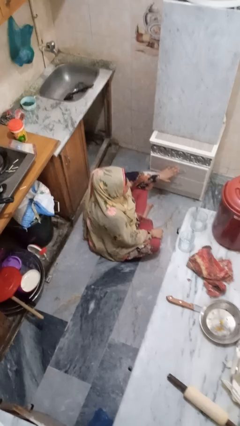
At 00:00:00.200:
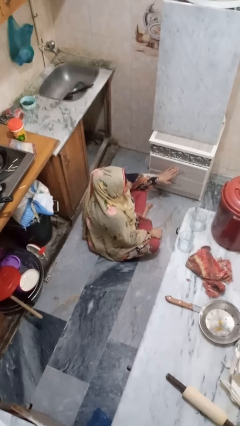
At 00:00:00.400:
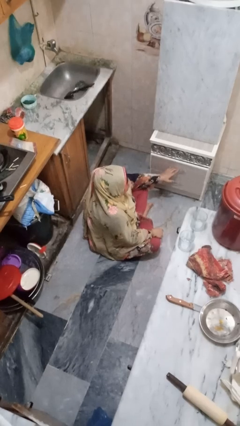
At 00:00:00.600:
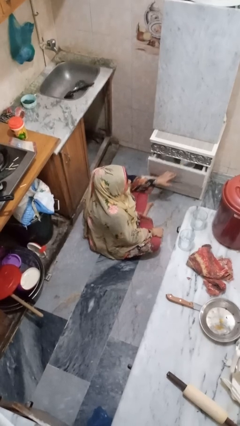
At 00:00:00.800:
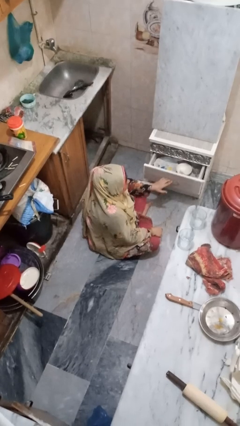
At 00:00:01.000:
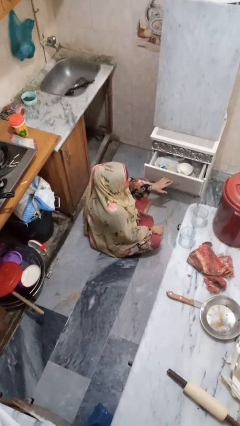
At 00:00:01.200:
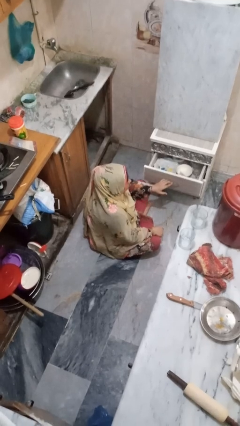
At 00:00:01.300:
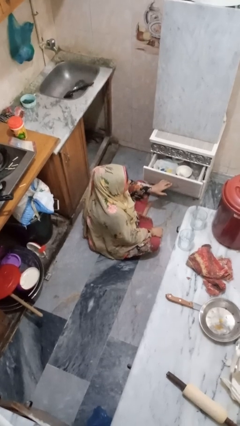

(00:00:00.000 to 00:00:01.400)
person opens kitchen drawer

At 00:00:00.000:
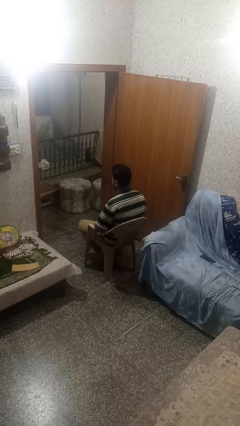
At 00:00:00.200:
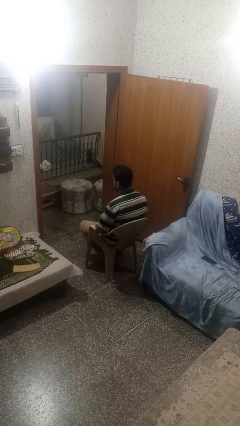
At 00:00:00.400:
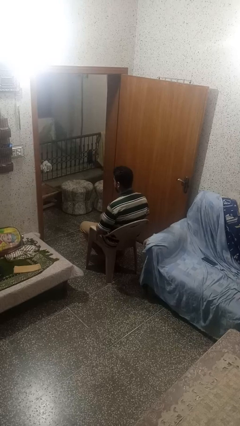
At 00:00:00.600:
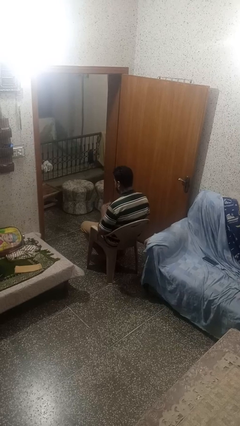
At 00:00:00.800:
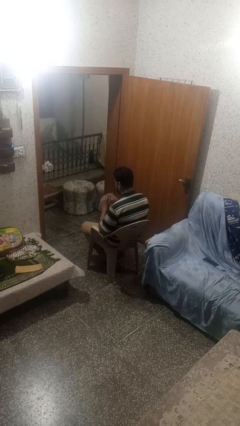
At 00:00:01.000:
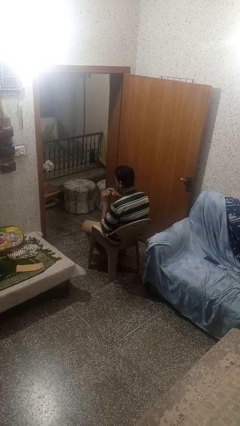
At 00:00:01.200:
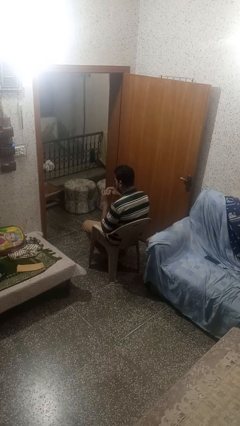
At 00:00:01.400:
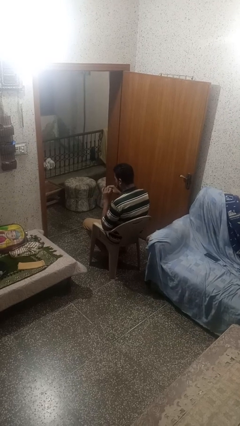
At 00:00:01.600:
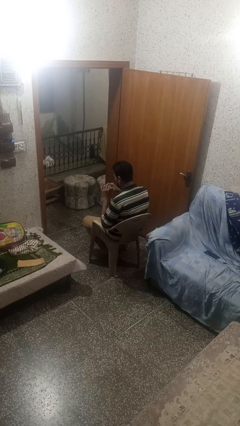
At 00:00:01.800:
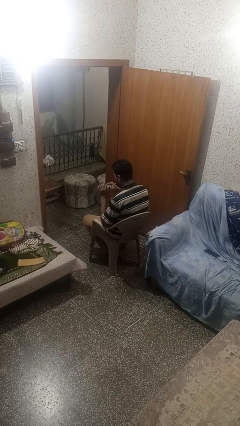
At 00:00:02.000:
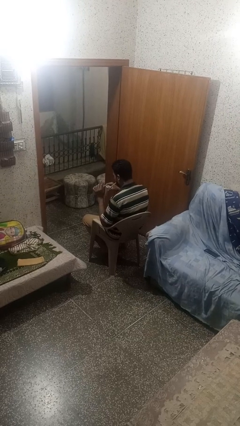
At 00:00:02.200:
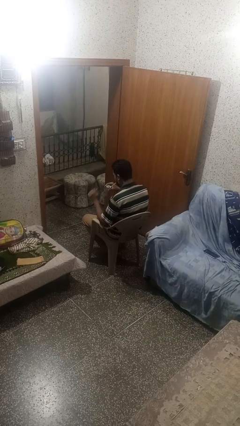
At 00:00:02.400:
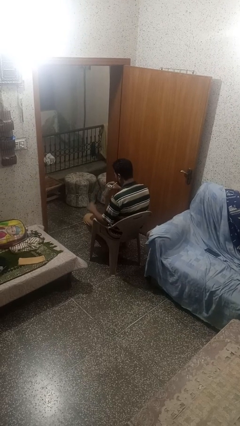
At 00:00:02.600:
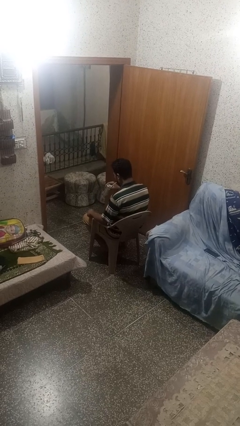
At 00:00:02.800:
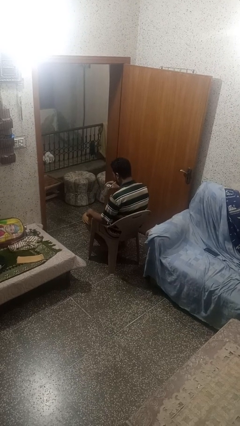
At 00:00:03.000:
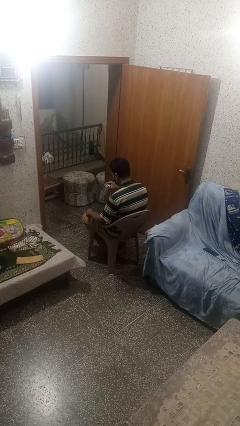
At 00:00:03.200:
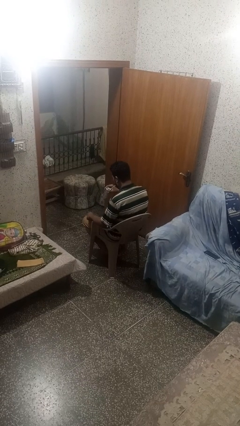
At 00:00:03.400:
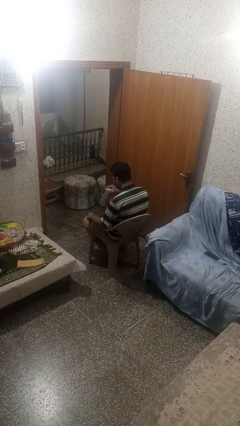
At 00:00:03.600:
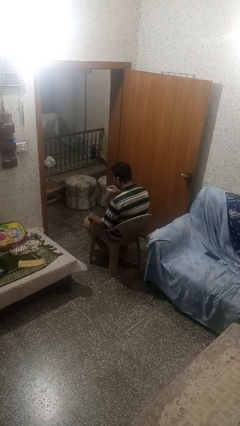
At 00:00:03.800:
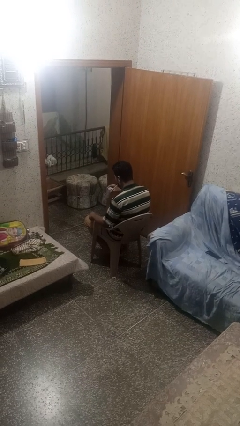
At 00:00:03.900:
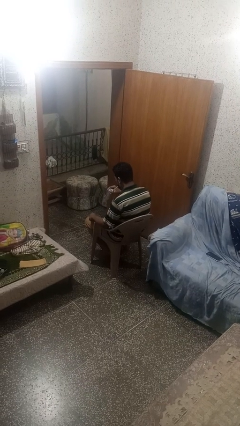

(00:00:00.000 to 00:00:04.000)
person drinks from straw

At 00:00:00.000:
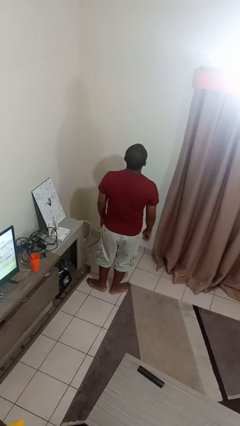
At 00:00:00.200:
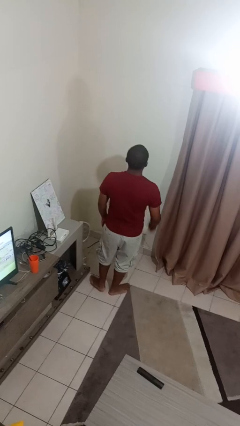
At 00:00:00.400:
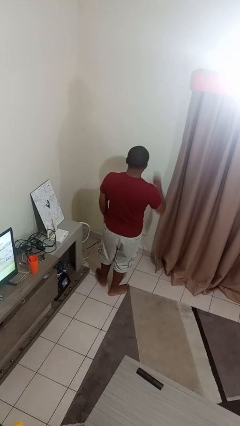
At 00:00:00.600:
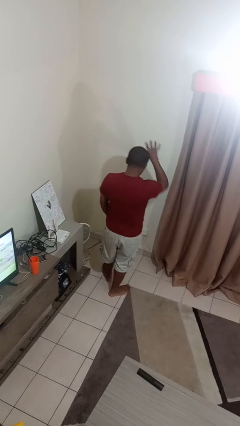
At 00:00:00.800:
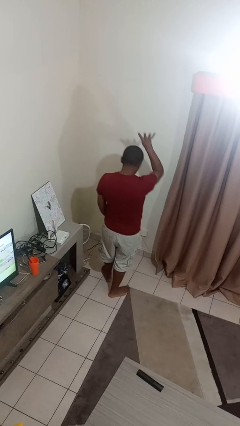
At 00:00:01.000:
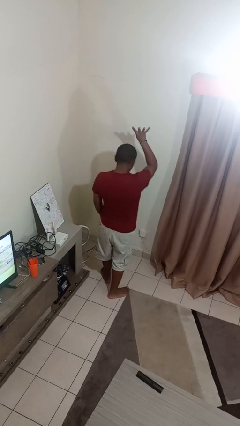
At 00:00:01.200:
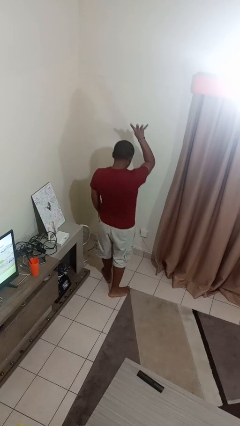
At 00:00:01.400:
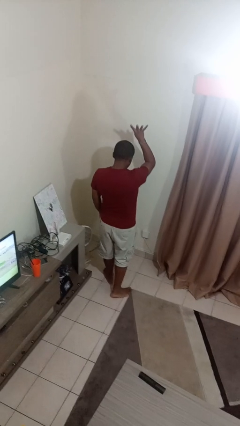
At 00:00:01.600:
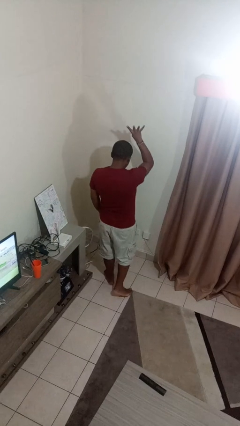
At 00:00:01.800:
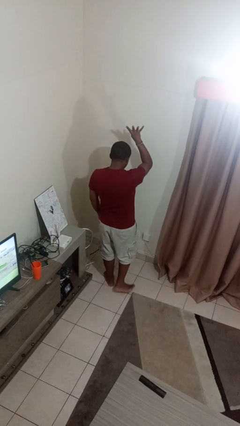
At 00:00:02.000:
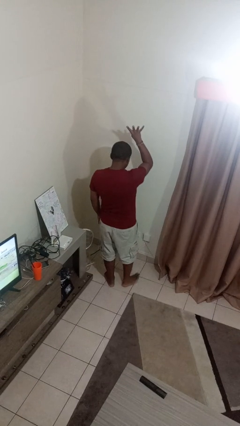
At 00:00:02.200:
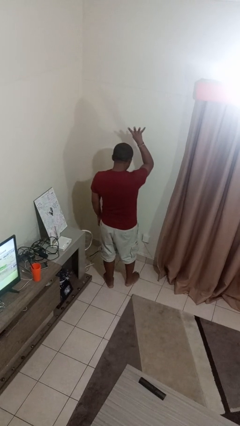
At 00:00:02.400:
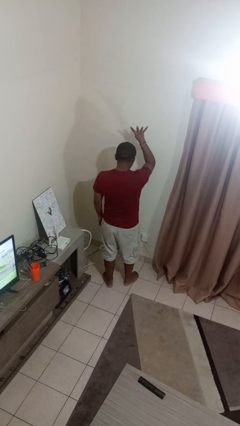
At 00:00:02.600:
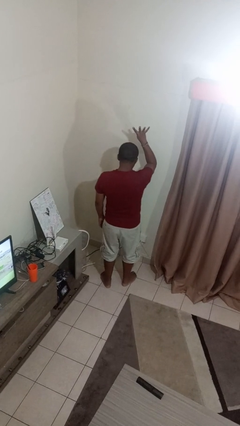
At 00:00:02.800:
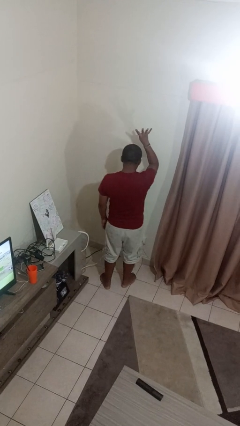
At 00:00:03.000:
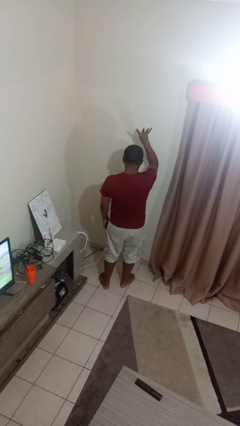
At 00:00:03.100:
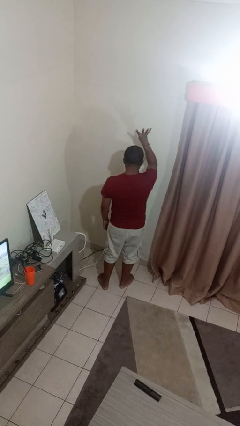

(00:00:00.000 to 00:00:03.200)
person gestures number four

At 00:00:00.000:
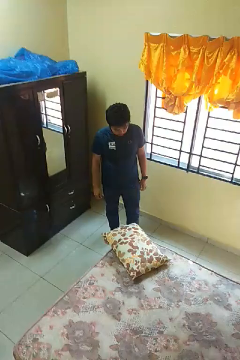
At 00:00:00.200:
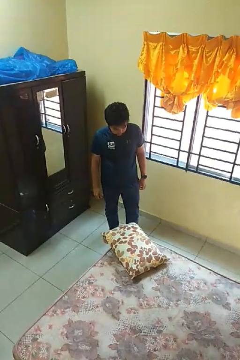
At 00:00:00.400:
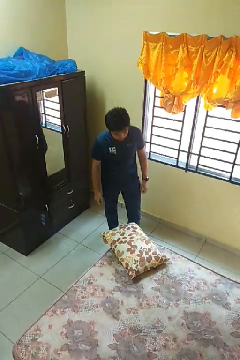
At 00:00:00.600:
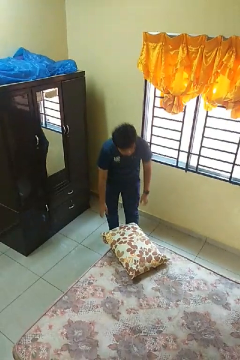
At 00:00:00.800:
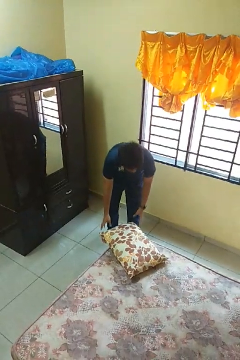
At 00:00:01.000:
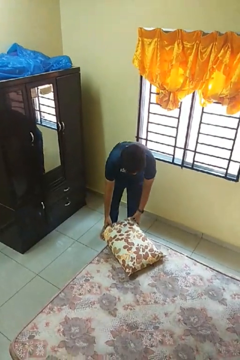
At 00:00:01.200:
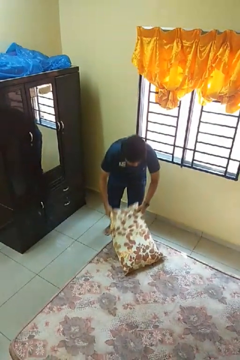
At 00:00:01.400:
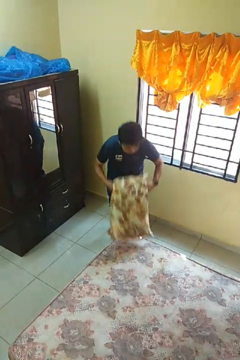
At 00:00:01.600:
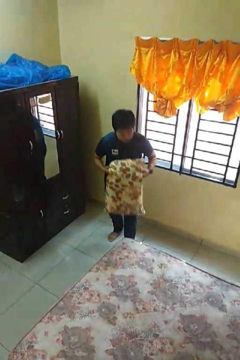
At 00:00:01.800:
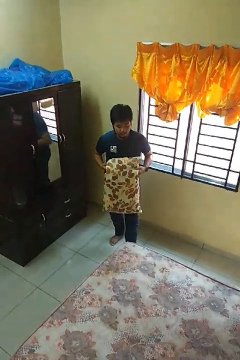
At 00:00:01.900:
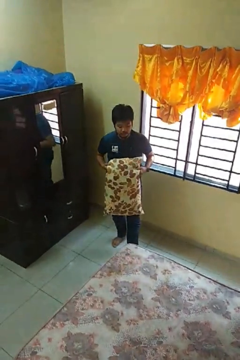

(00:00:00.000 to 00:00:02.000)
person picks up object from bed

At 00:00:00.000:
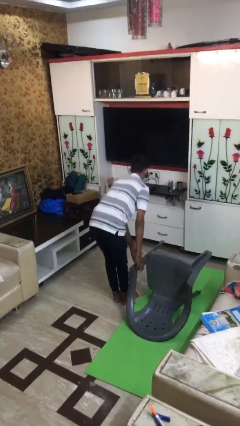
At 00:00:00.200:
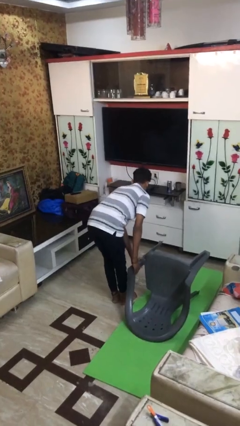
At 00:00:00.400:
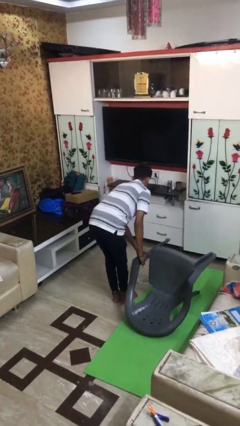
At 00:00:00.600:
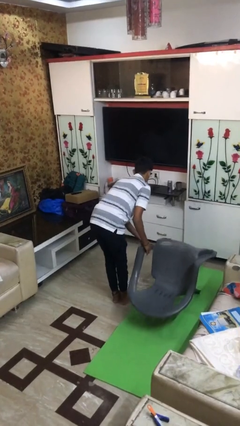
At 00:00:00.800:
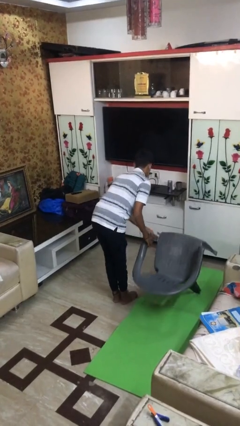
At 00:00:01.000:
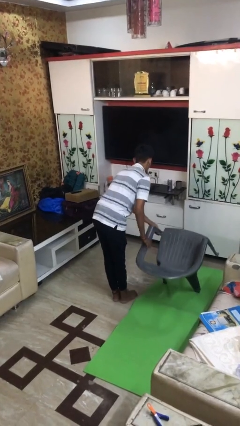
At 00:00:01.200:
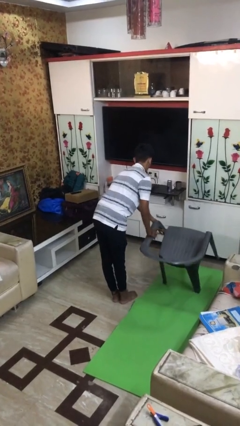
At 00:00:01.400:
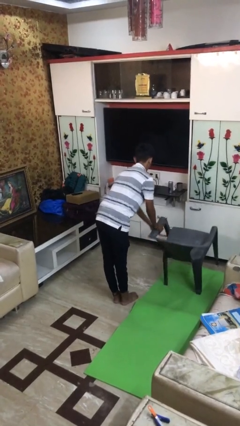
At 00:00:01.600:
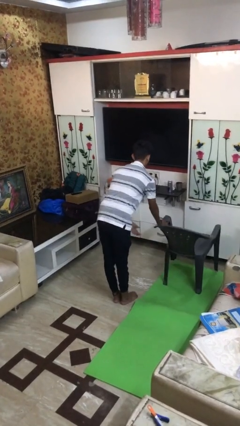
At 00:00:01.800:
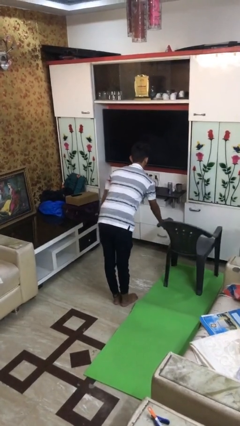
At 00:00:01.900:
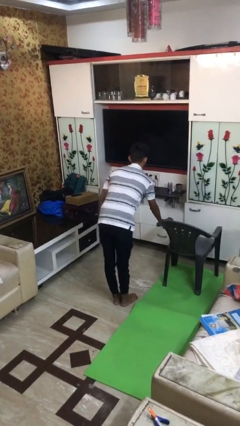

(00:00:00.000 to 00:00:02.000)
person sets upright furniture

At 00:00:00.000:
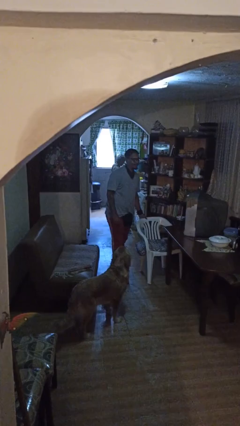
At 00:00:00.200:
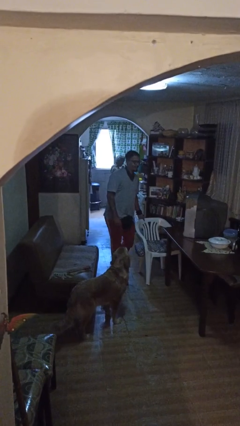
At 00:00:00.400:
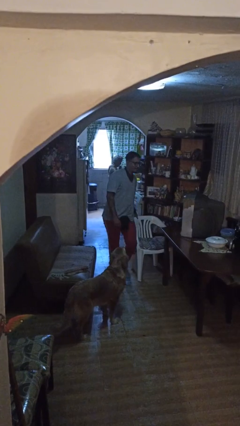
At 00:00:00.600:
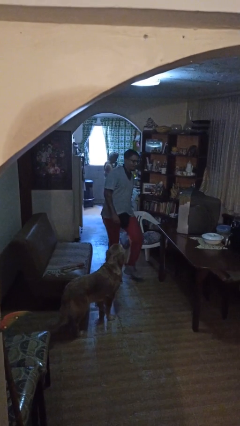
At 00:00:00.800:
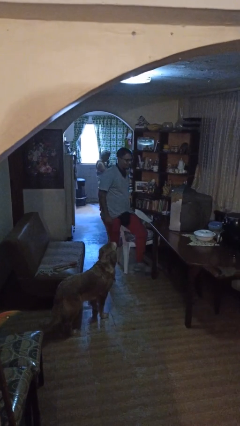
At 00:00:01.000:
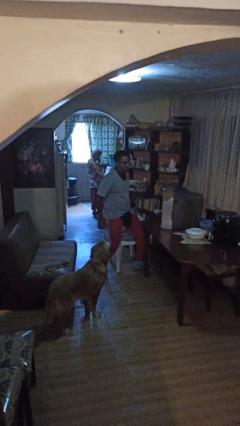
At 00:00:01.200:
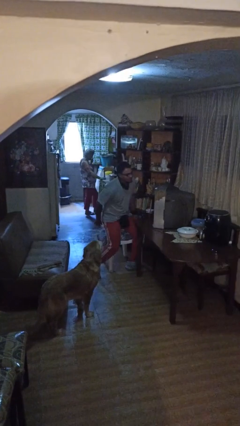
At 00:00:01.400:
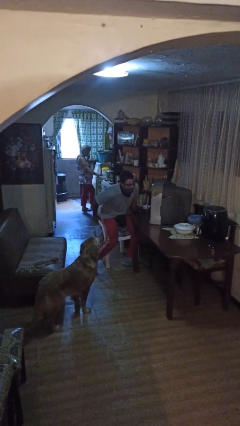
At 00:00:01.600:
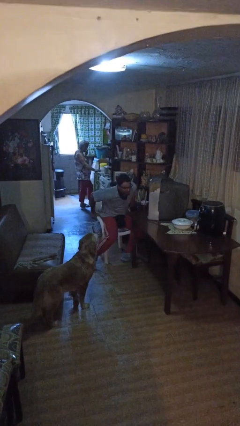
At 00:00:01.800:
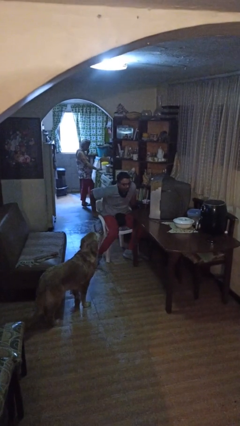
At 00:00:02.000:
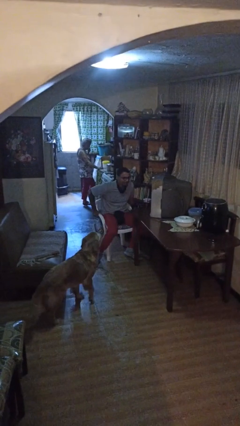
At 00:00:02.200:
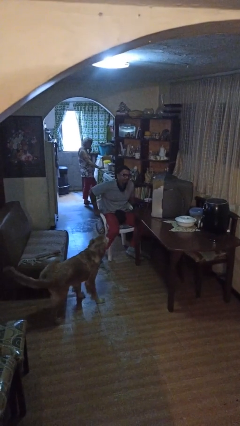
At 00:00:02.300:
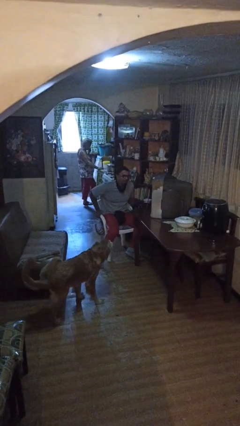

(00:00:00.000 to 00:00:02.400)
person sits down

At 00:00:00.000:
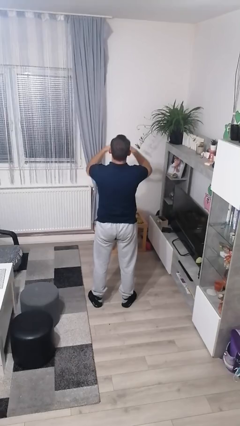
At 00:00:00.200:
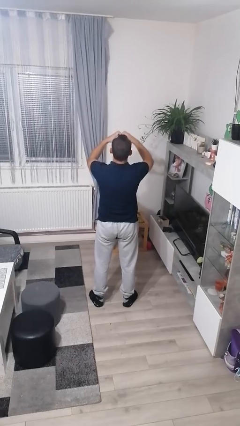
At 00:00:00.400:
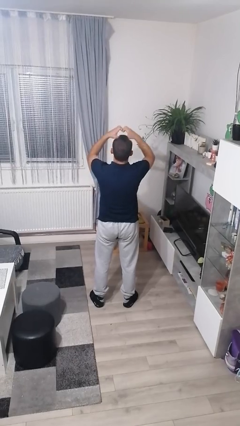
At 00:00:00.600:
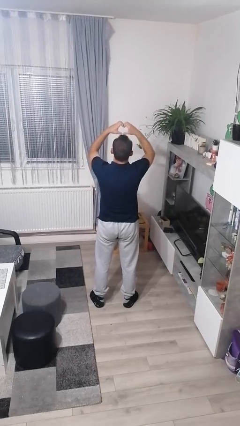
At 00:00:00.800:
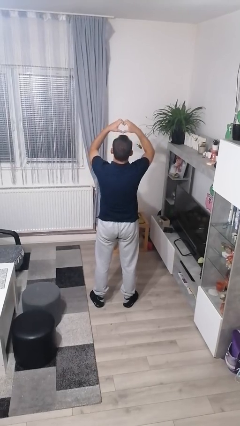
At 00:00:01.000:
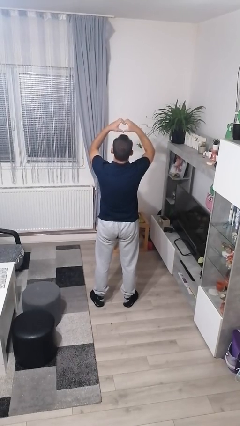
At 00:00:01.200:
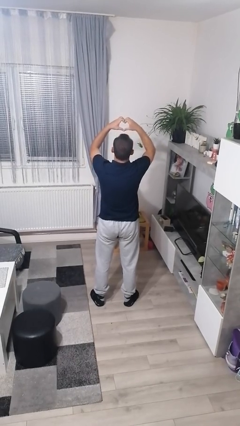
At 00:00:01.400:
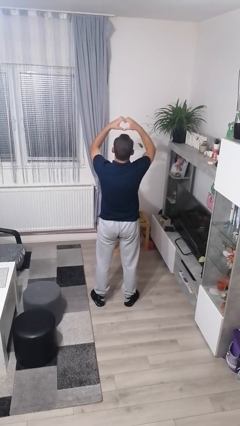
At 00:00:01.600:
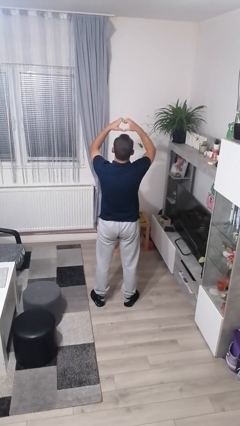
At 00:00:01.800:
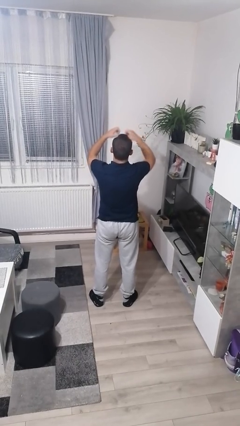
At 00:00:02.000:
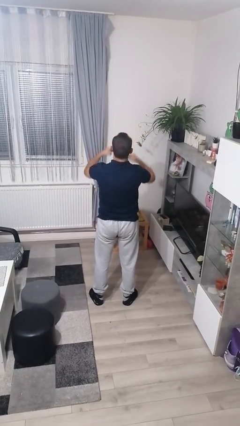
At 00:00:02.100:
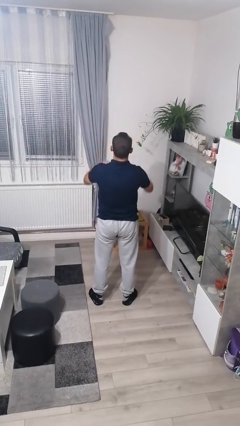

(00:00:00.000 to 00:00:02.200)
person gestures heart
